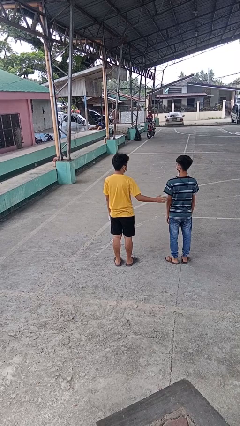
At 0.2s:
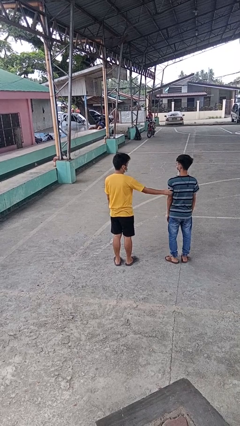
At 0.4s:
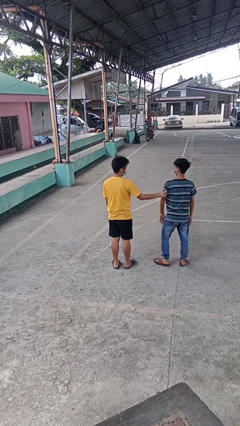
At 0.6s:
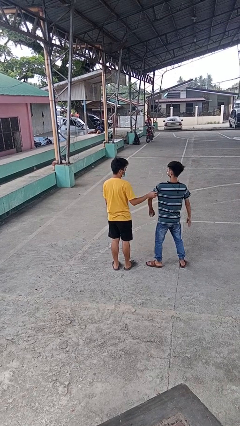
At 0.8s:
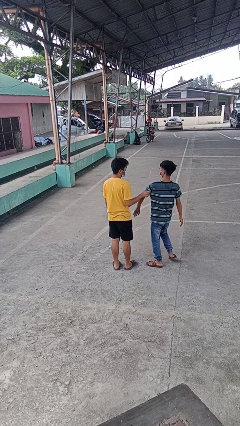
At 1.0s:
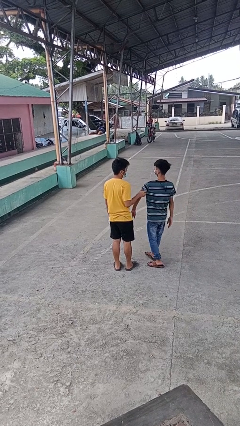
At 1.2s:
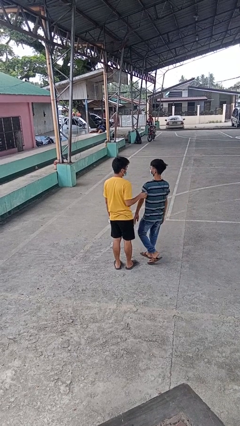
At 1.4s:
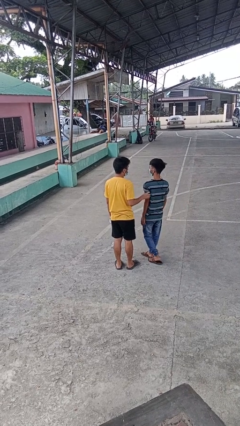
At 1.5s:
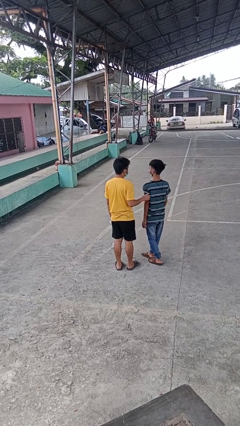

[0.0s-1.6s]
person grabs person by bicep

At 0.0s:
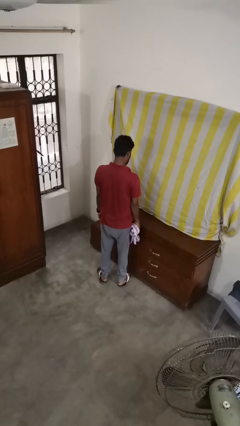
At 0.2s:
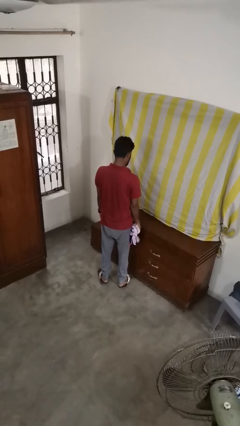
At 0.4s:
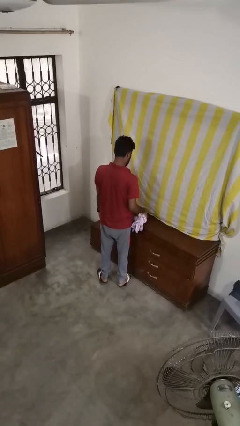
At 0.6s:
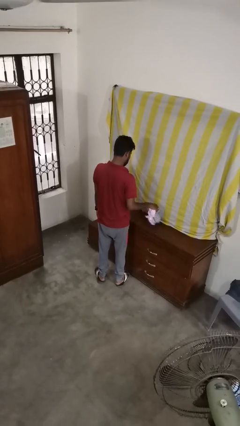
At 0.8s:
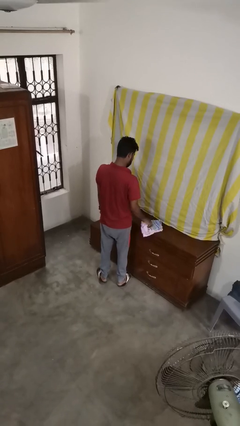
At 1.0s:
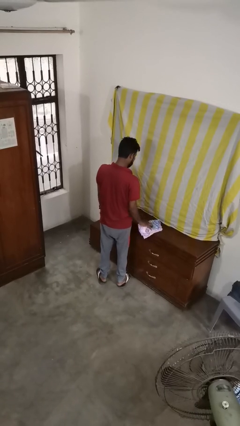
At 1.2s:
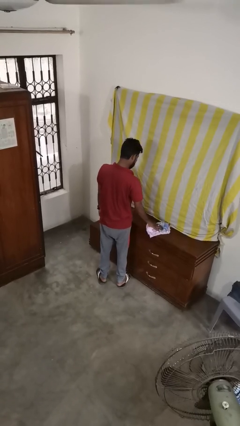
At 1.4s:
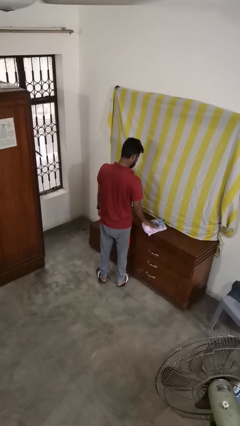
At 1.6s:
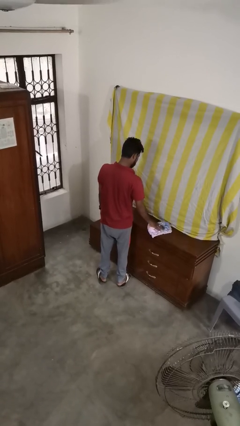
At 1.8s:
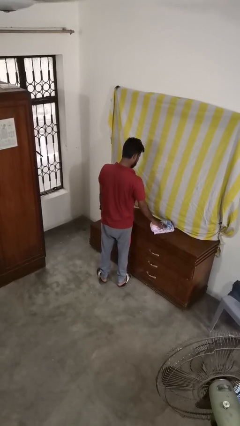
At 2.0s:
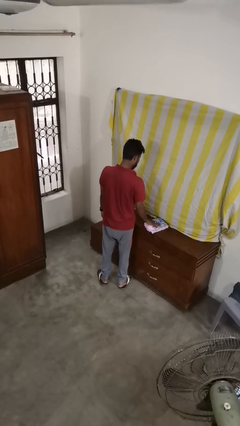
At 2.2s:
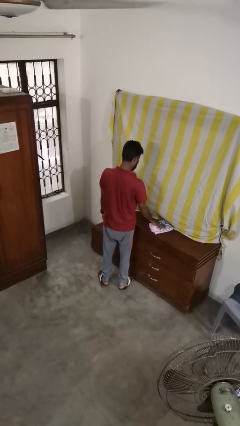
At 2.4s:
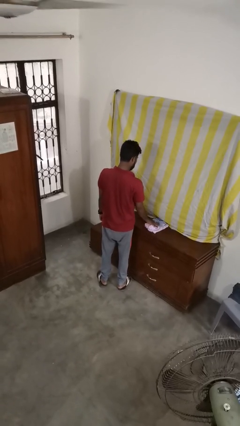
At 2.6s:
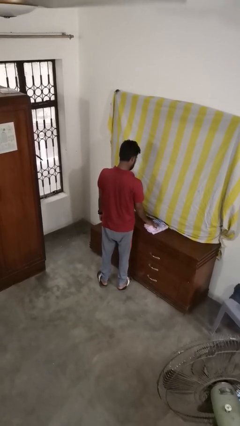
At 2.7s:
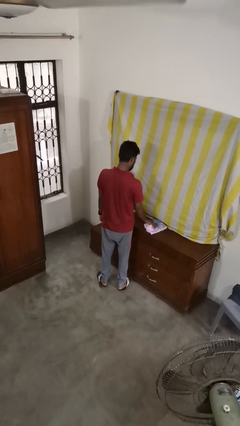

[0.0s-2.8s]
person cleans table with rag

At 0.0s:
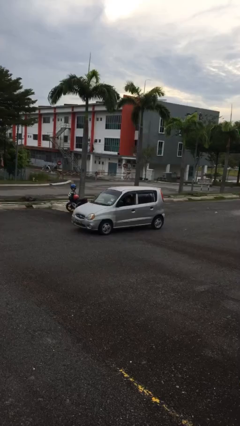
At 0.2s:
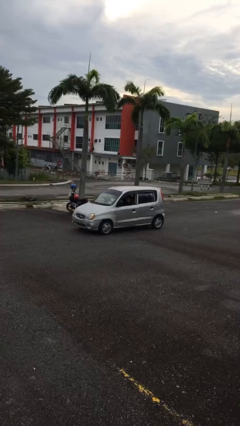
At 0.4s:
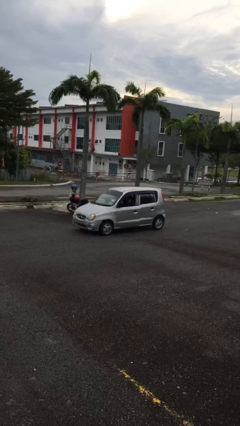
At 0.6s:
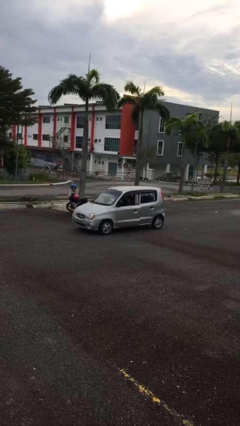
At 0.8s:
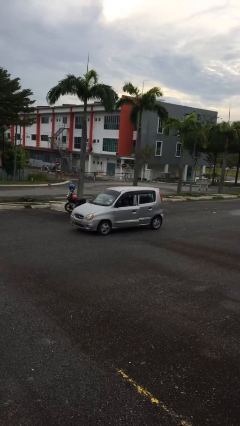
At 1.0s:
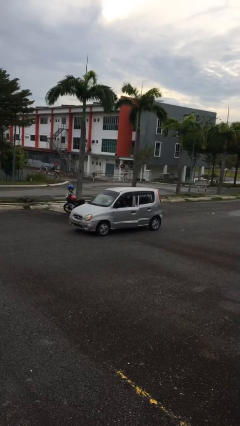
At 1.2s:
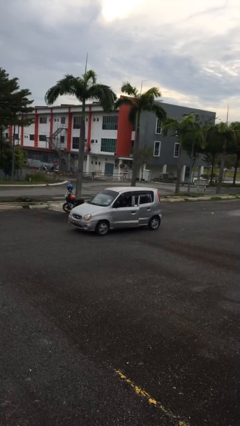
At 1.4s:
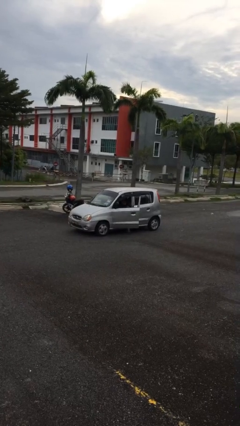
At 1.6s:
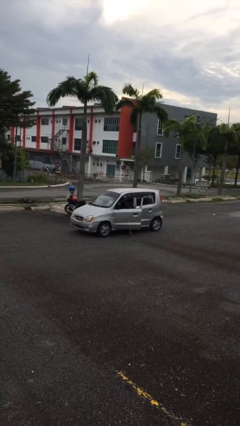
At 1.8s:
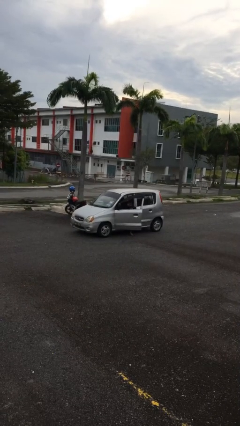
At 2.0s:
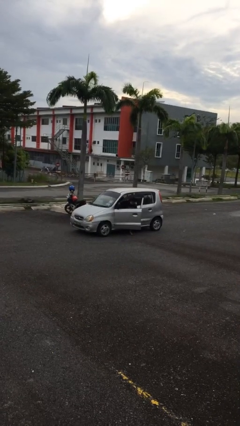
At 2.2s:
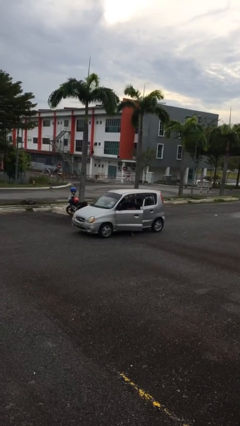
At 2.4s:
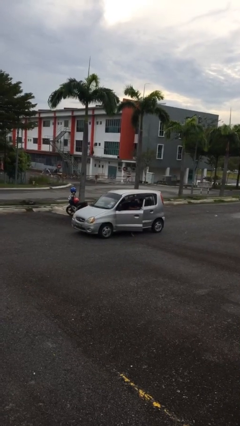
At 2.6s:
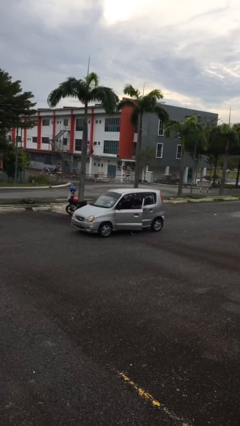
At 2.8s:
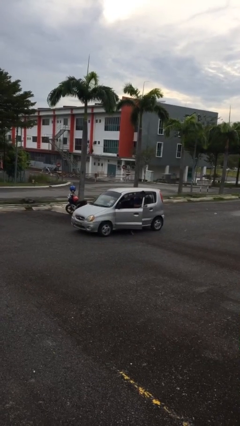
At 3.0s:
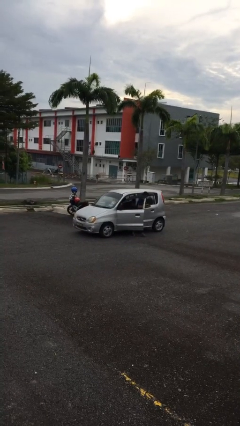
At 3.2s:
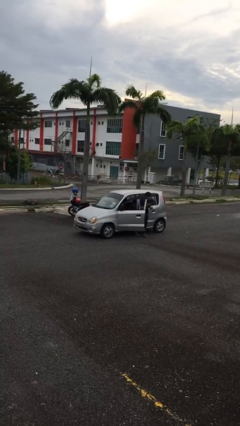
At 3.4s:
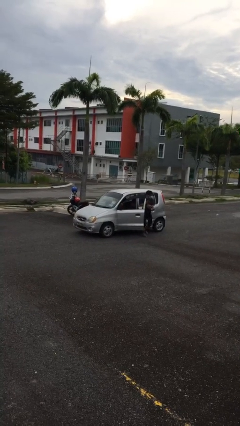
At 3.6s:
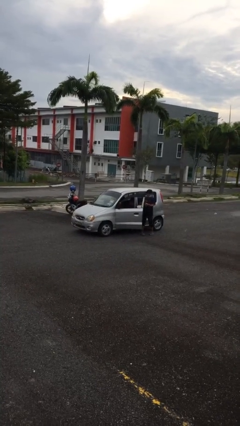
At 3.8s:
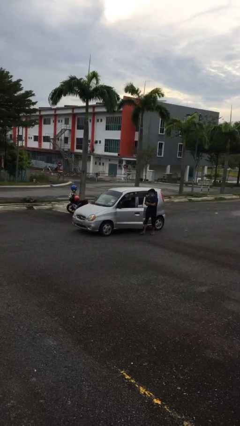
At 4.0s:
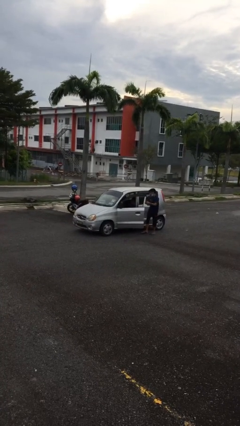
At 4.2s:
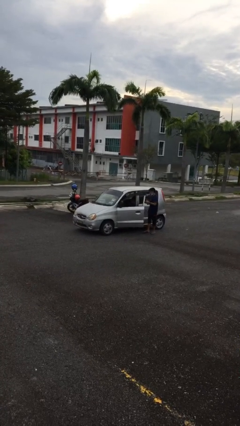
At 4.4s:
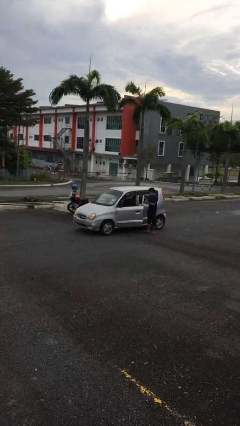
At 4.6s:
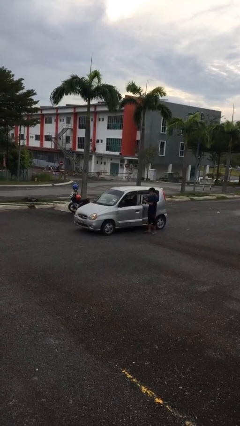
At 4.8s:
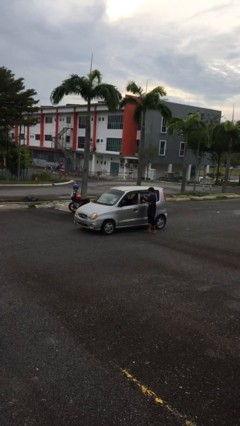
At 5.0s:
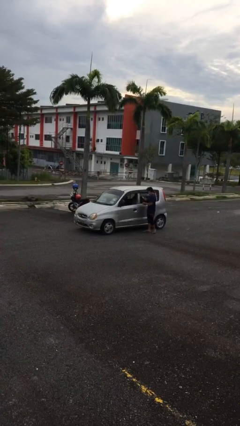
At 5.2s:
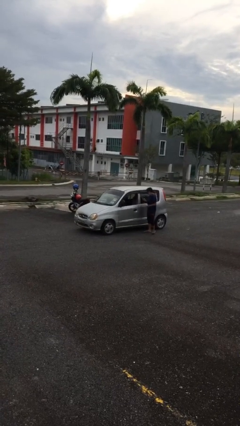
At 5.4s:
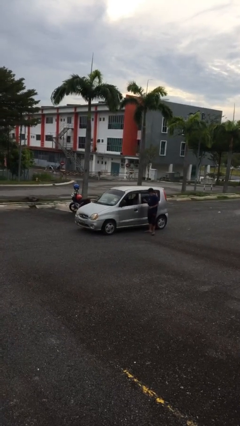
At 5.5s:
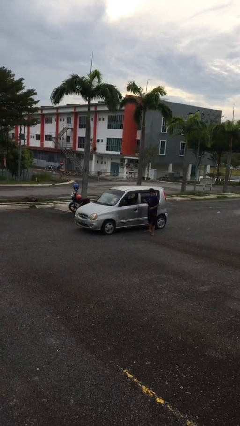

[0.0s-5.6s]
car drops off person

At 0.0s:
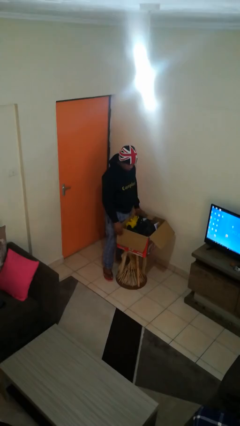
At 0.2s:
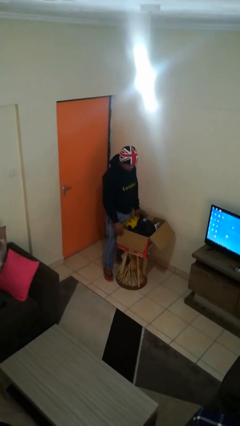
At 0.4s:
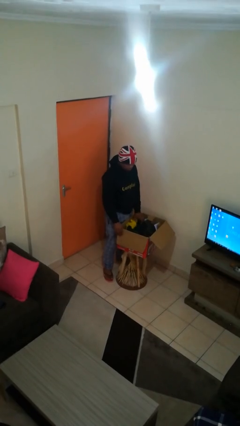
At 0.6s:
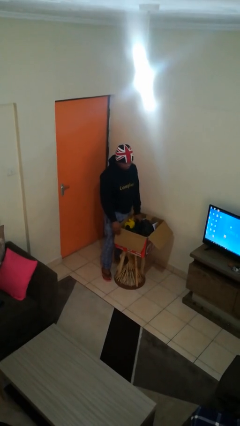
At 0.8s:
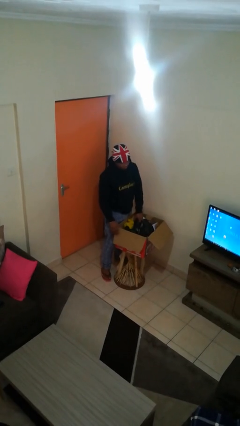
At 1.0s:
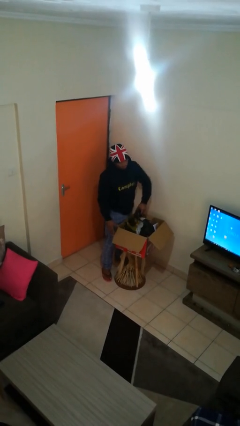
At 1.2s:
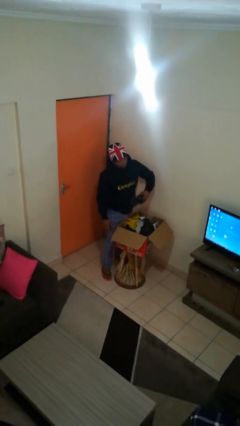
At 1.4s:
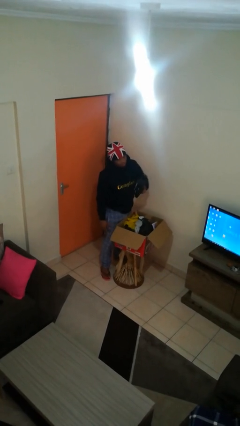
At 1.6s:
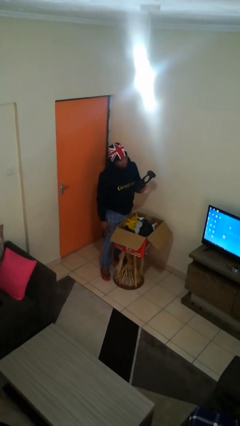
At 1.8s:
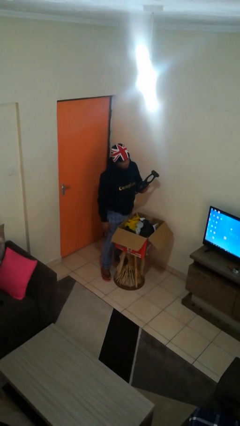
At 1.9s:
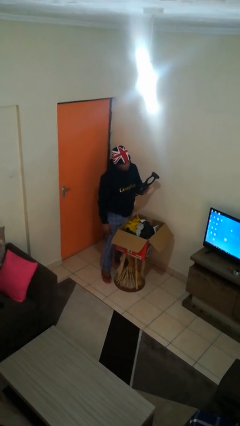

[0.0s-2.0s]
person takes object from box

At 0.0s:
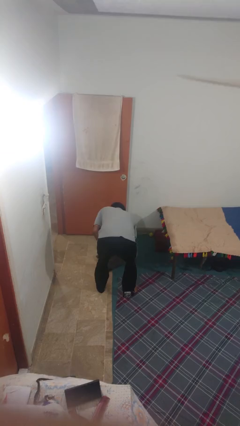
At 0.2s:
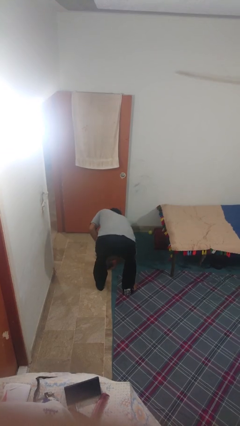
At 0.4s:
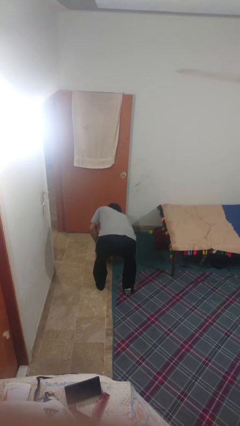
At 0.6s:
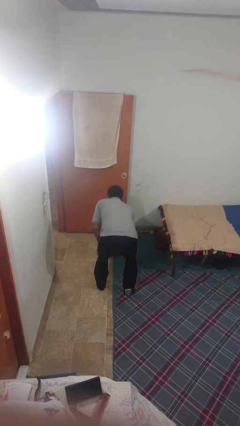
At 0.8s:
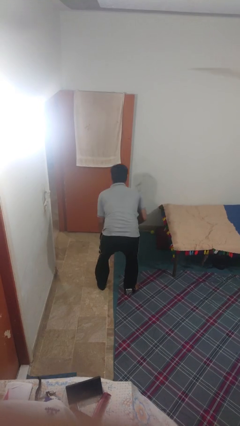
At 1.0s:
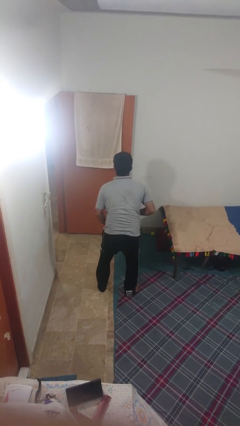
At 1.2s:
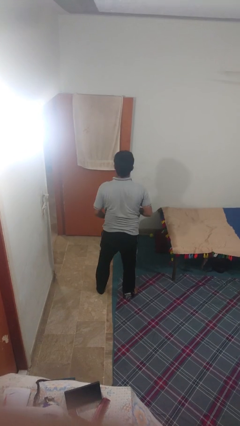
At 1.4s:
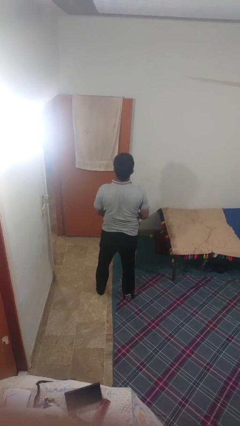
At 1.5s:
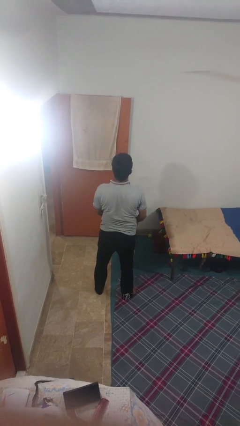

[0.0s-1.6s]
person picks up object from floor

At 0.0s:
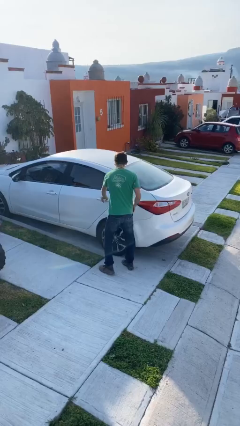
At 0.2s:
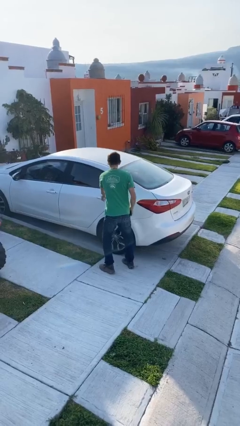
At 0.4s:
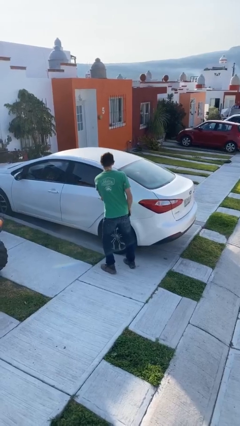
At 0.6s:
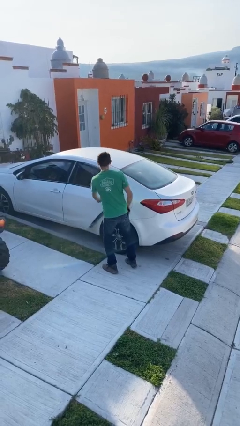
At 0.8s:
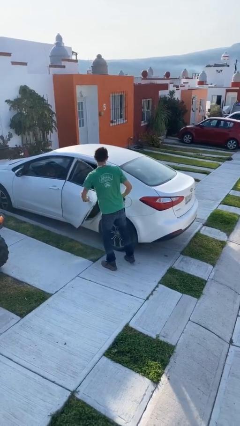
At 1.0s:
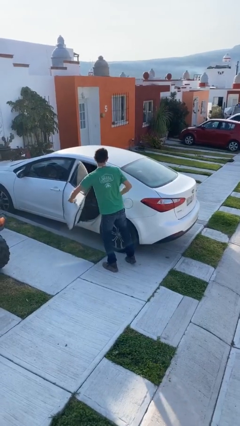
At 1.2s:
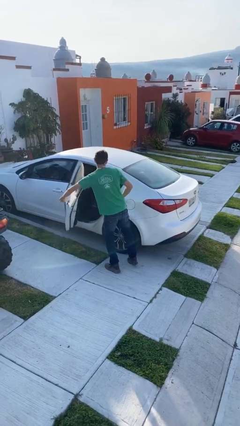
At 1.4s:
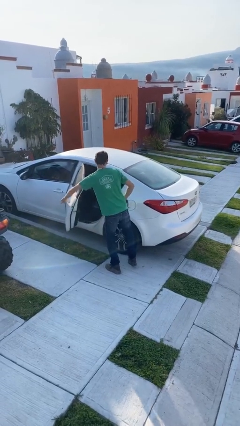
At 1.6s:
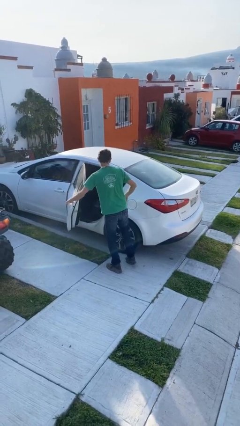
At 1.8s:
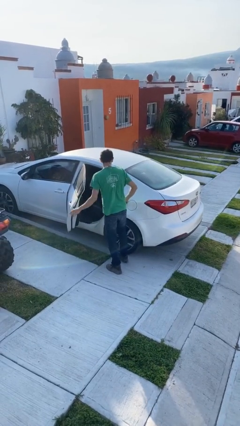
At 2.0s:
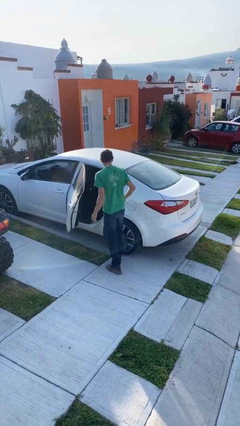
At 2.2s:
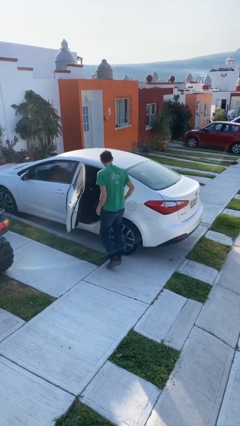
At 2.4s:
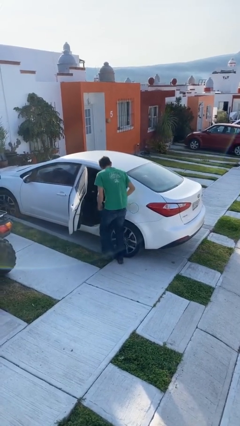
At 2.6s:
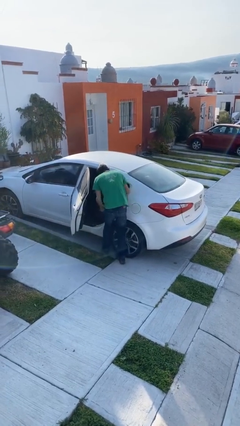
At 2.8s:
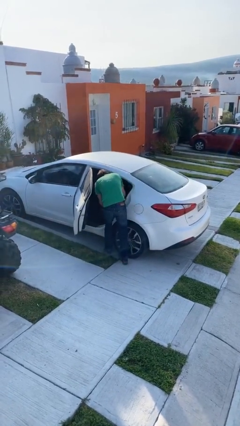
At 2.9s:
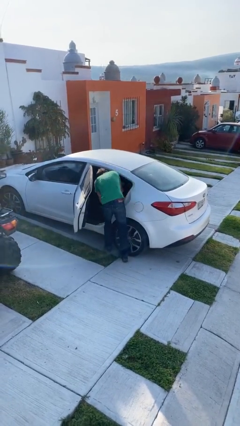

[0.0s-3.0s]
person opens car door

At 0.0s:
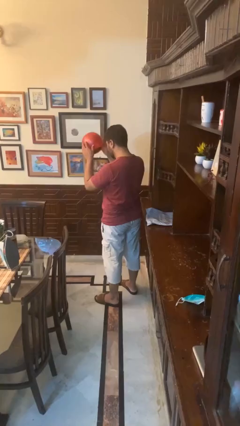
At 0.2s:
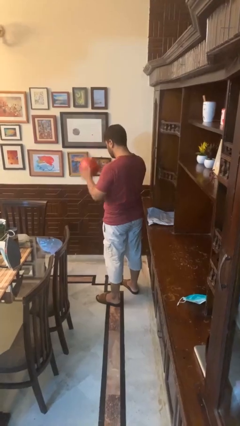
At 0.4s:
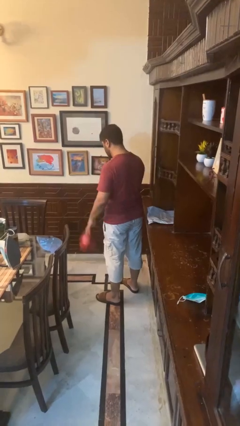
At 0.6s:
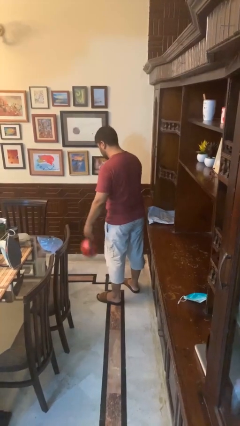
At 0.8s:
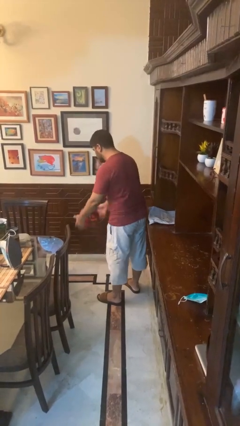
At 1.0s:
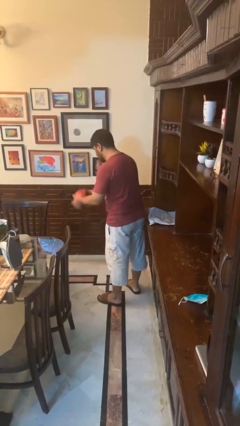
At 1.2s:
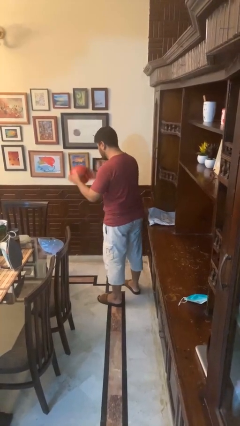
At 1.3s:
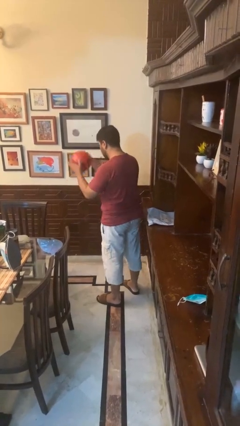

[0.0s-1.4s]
person bounces ball on floor
